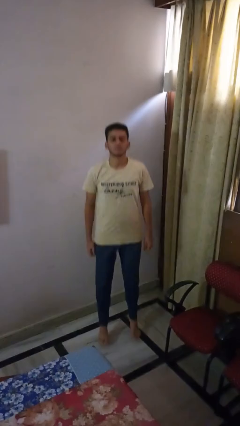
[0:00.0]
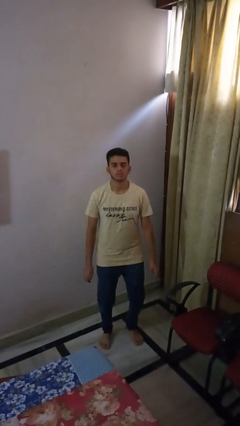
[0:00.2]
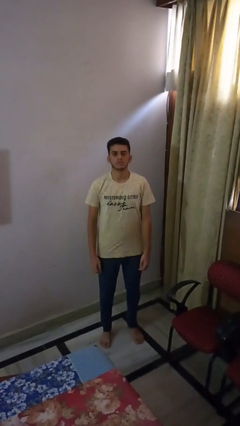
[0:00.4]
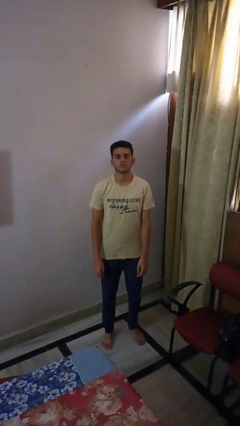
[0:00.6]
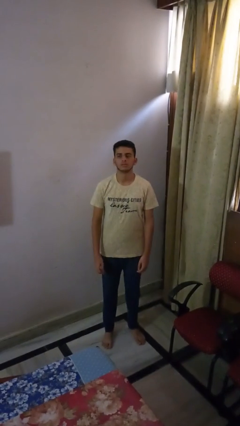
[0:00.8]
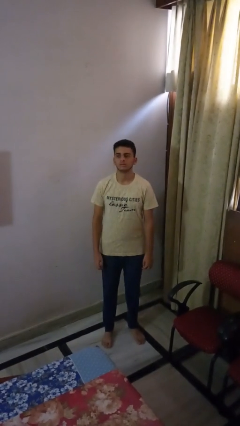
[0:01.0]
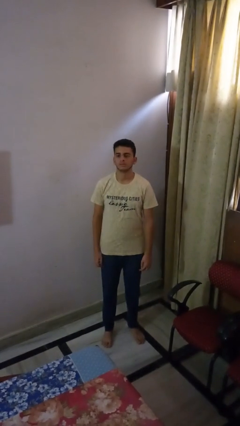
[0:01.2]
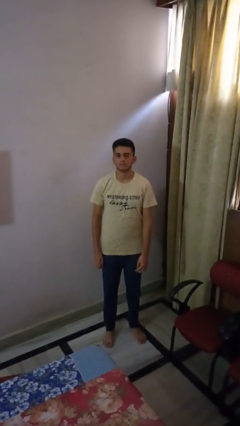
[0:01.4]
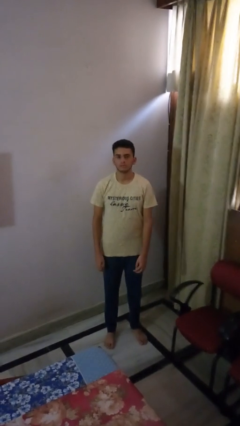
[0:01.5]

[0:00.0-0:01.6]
person jumps

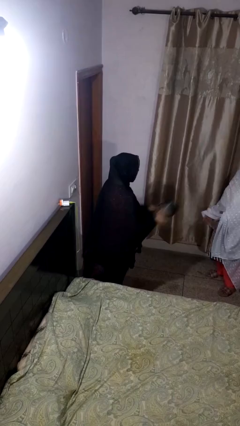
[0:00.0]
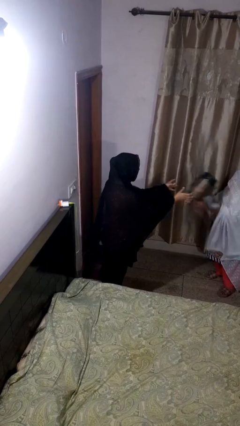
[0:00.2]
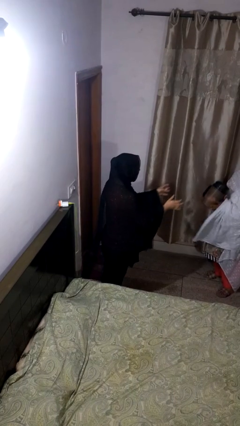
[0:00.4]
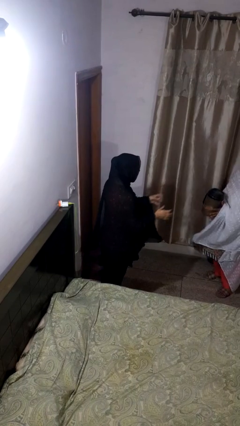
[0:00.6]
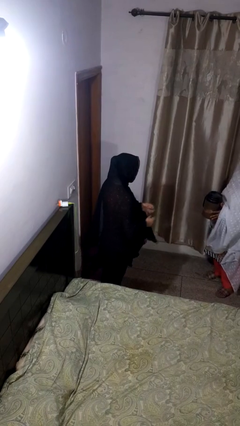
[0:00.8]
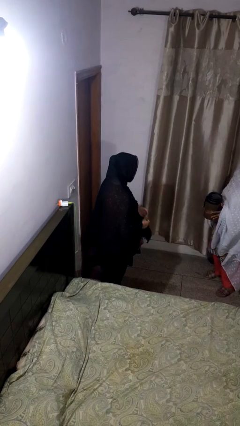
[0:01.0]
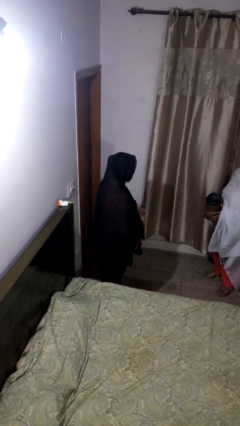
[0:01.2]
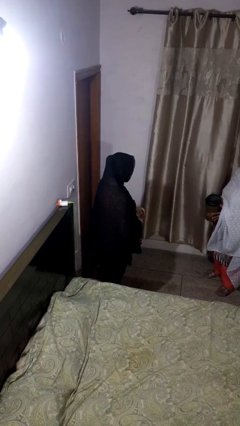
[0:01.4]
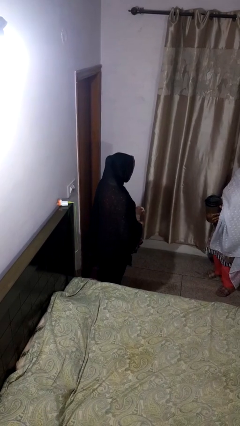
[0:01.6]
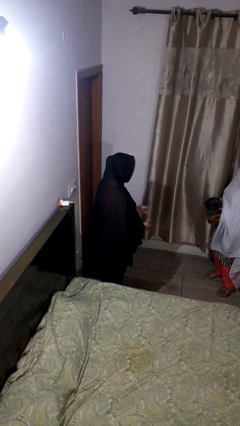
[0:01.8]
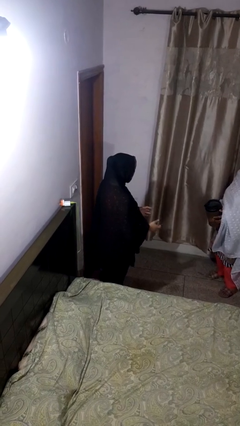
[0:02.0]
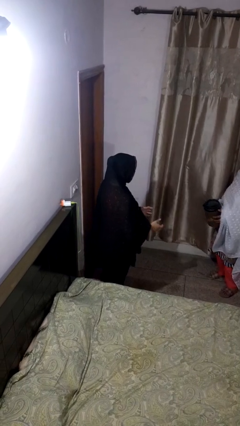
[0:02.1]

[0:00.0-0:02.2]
person throws object to person

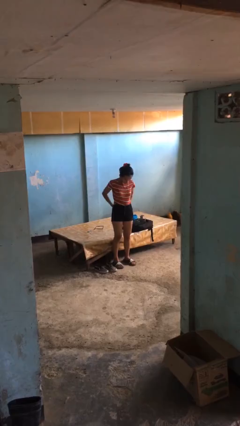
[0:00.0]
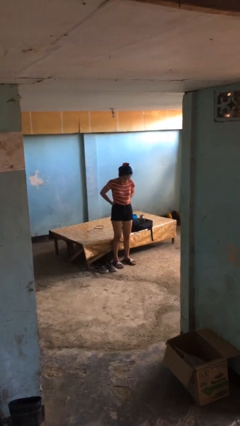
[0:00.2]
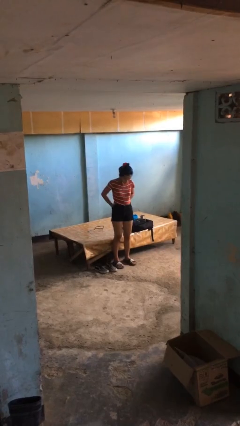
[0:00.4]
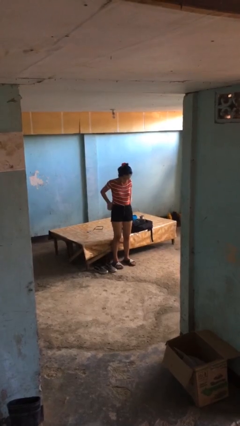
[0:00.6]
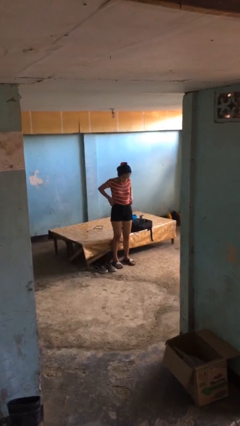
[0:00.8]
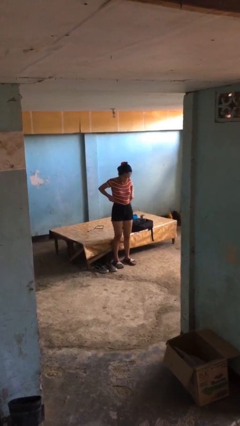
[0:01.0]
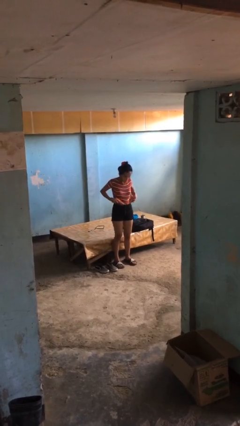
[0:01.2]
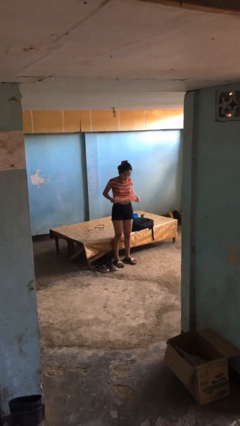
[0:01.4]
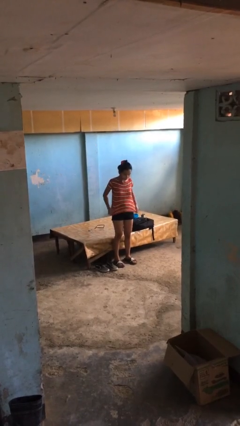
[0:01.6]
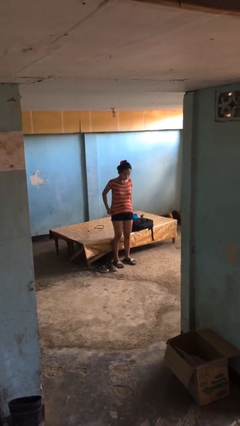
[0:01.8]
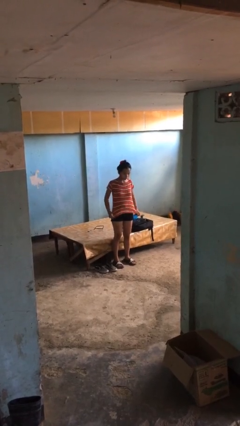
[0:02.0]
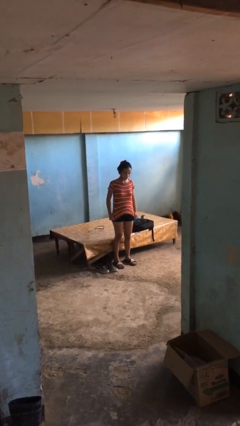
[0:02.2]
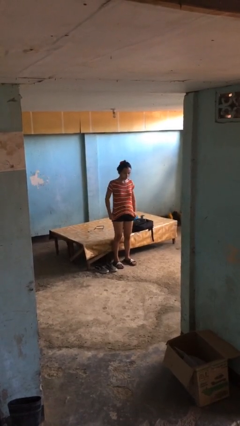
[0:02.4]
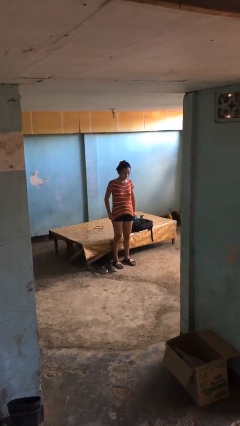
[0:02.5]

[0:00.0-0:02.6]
person untucks shirt

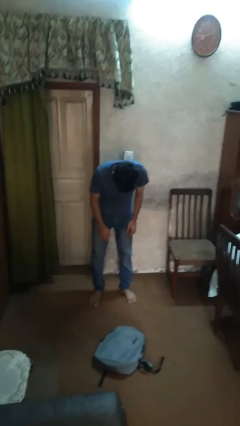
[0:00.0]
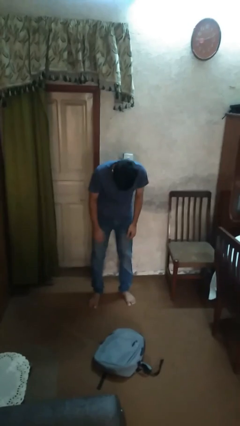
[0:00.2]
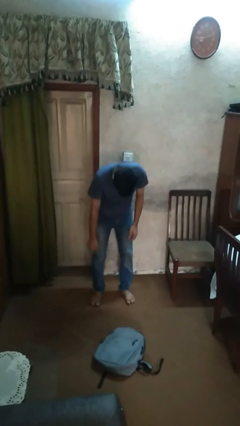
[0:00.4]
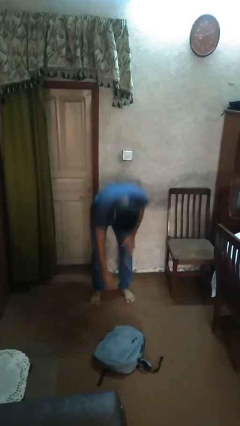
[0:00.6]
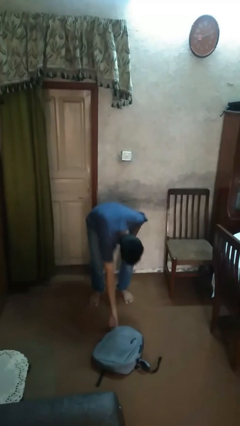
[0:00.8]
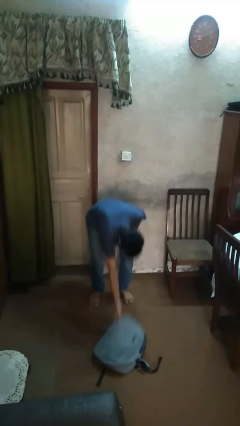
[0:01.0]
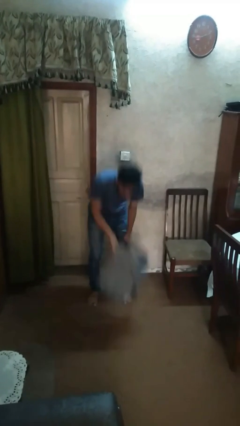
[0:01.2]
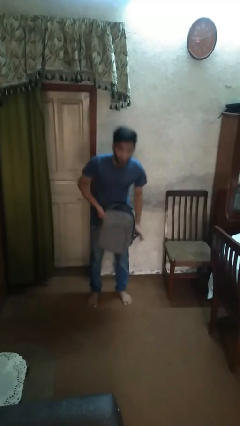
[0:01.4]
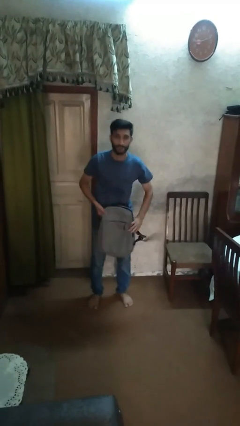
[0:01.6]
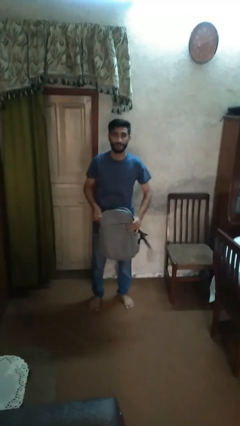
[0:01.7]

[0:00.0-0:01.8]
person picks up object from floor

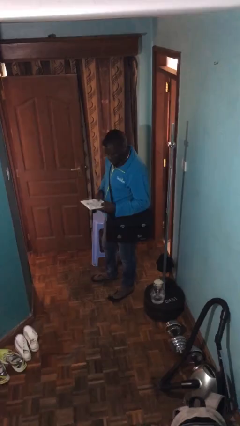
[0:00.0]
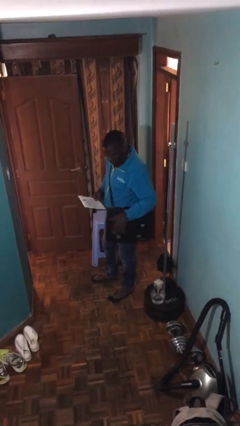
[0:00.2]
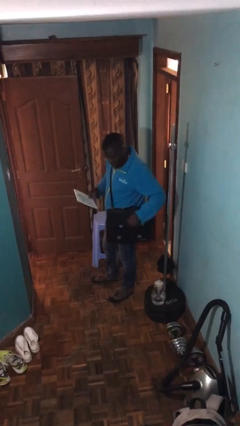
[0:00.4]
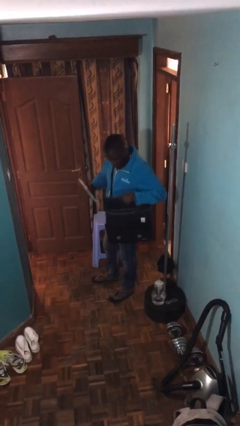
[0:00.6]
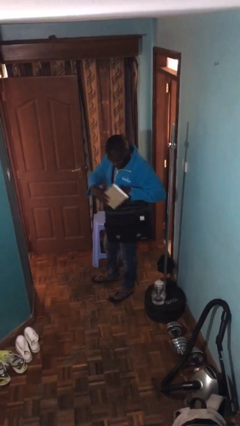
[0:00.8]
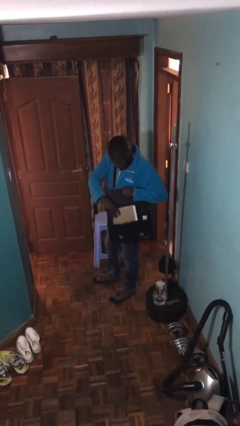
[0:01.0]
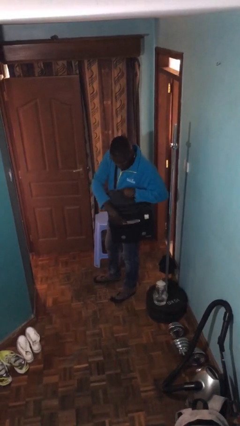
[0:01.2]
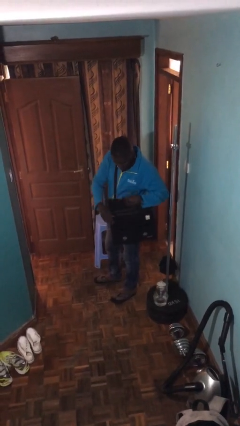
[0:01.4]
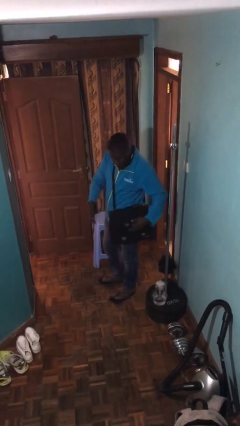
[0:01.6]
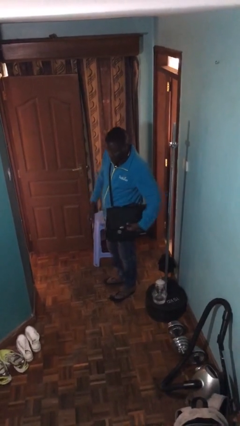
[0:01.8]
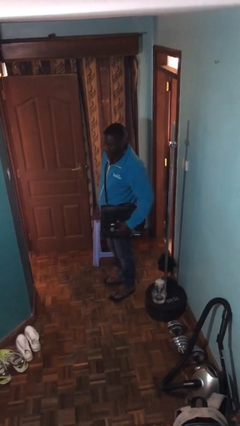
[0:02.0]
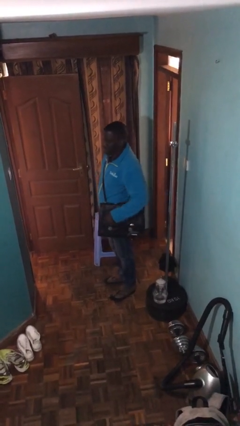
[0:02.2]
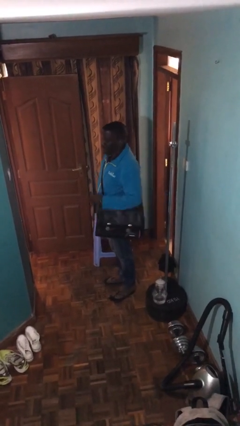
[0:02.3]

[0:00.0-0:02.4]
person puts object into purse

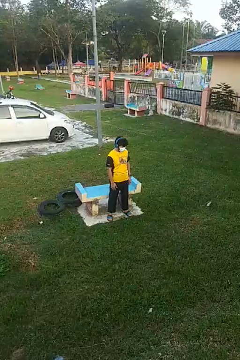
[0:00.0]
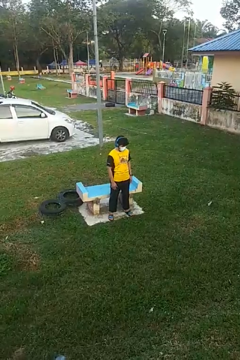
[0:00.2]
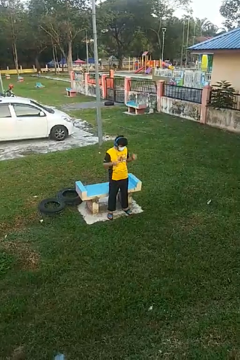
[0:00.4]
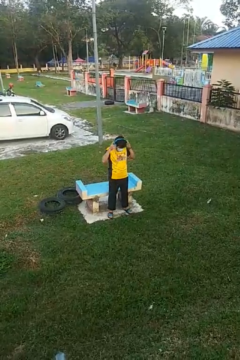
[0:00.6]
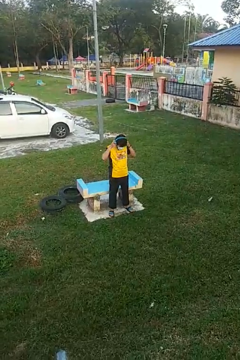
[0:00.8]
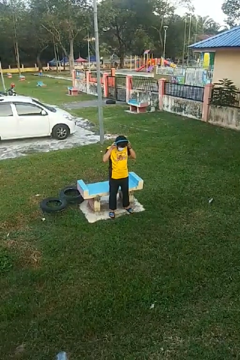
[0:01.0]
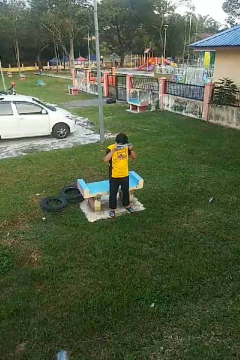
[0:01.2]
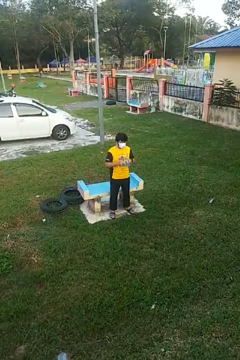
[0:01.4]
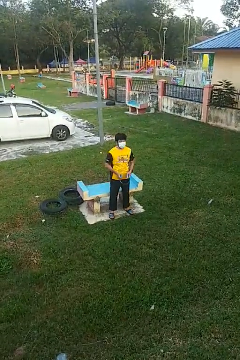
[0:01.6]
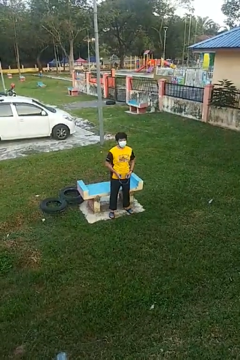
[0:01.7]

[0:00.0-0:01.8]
person takes off headphones

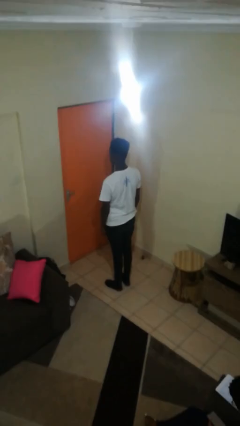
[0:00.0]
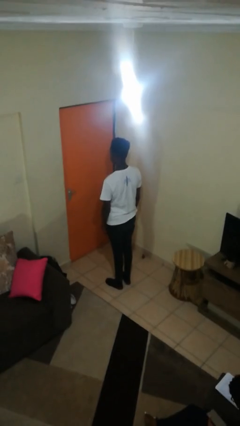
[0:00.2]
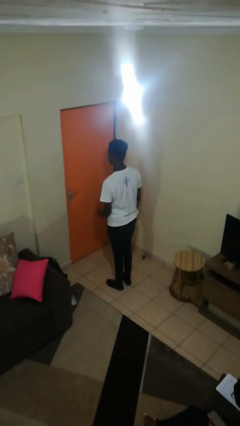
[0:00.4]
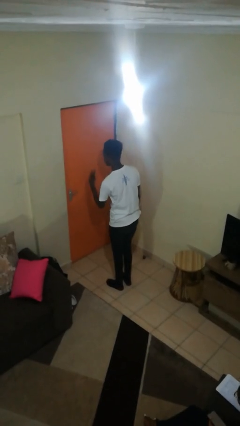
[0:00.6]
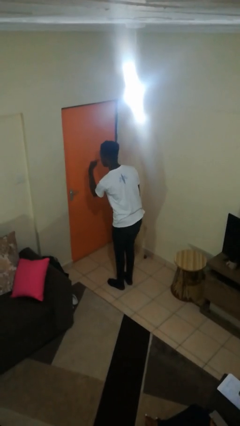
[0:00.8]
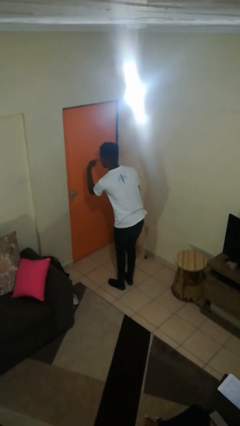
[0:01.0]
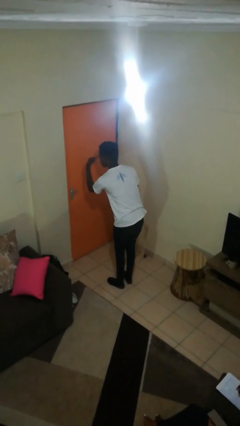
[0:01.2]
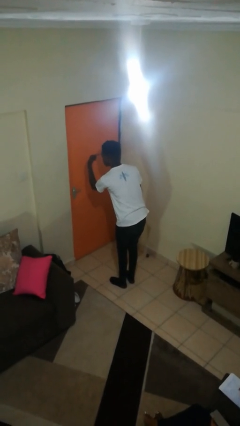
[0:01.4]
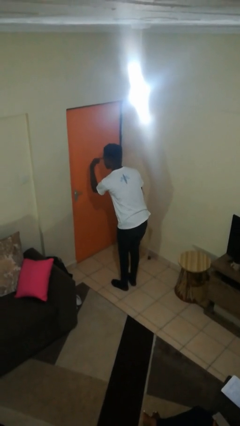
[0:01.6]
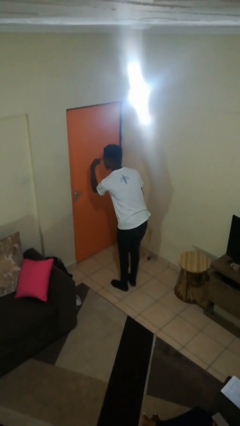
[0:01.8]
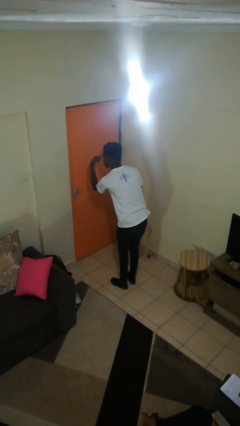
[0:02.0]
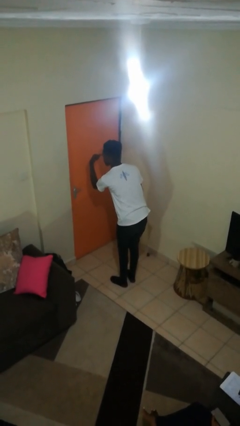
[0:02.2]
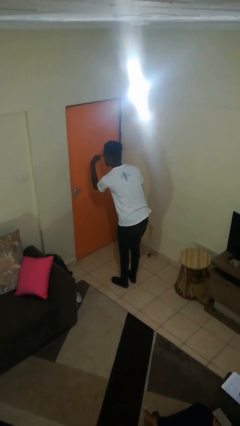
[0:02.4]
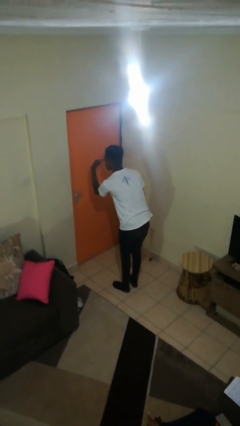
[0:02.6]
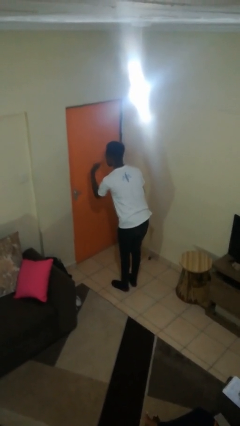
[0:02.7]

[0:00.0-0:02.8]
person gestures watch closely

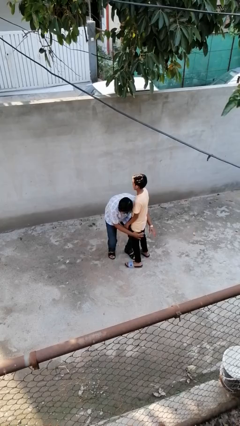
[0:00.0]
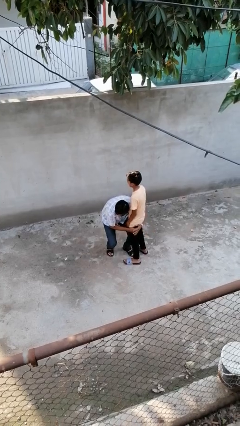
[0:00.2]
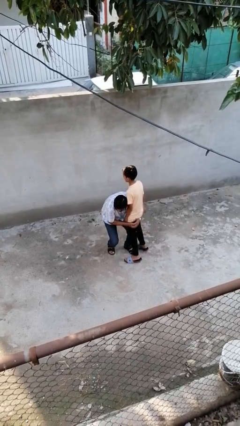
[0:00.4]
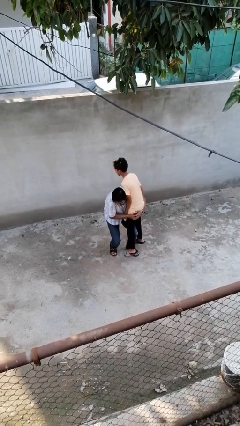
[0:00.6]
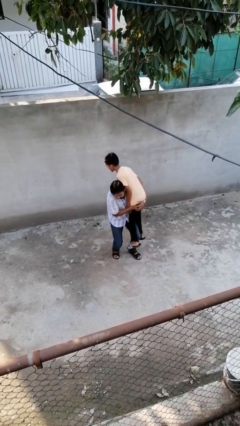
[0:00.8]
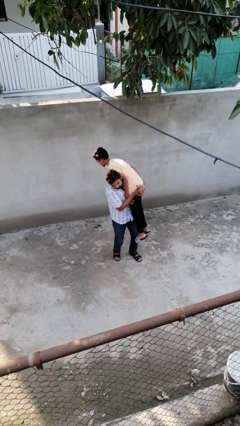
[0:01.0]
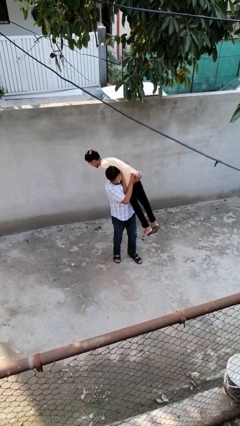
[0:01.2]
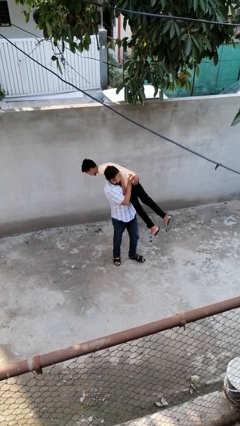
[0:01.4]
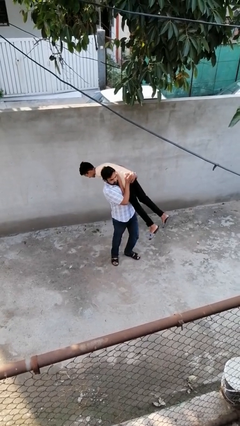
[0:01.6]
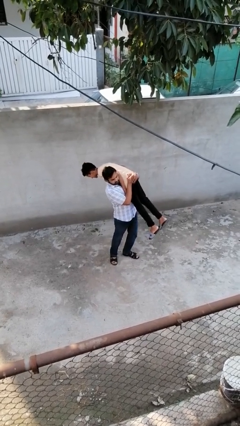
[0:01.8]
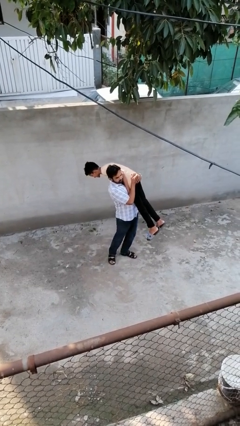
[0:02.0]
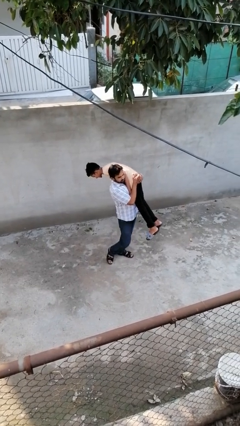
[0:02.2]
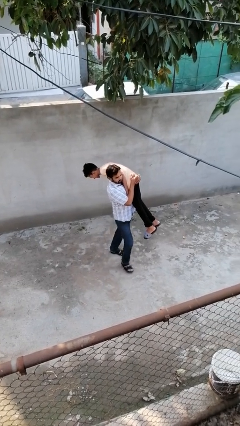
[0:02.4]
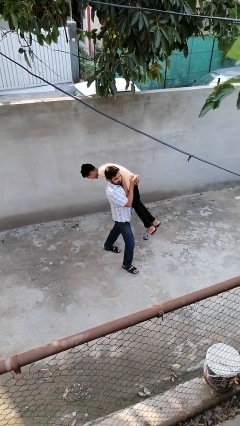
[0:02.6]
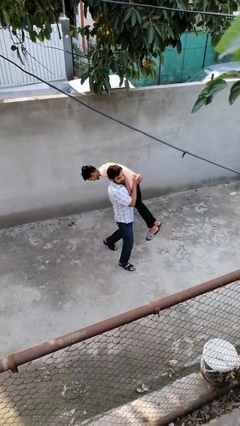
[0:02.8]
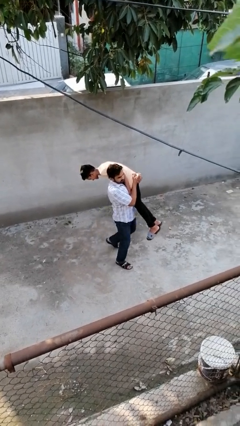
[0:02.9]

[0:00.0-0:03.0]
person carries person over shoulder
